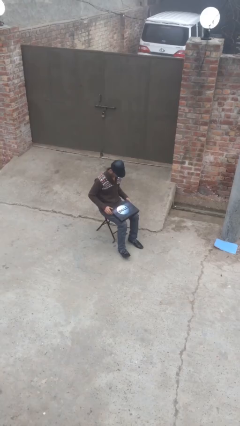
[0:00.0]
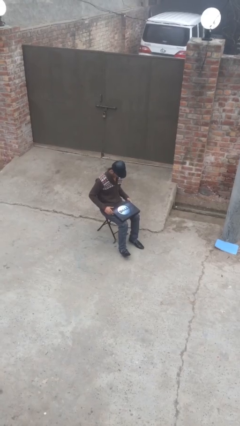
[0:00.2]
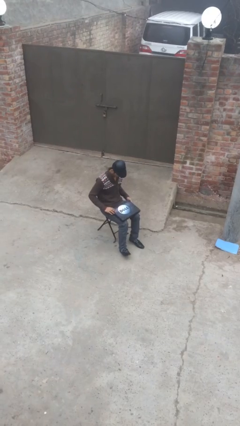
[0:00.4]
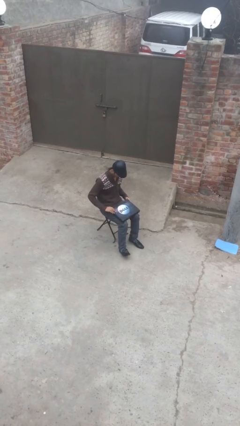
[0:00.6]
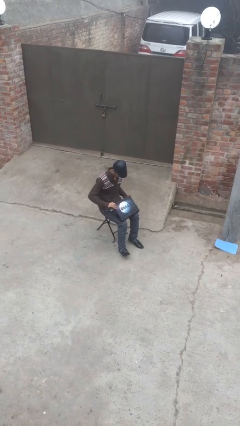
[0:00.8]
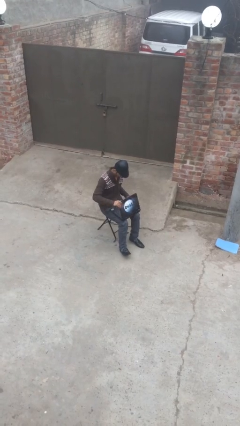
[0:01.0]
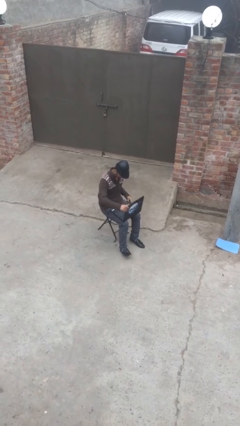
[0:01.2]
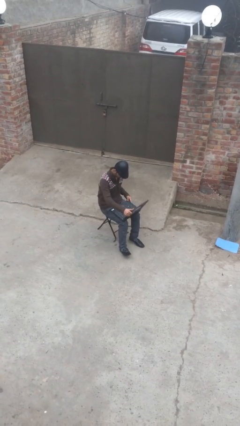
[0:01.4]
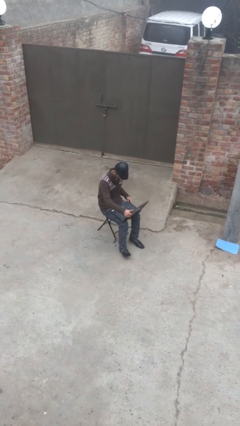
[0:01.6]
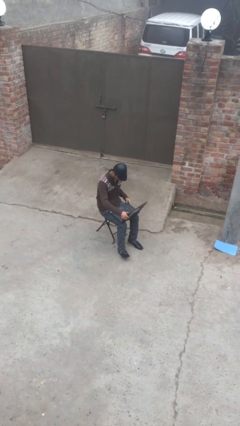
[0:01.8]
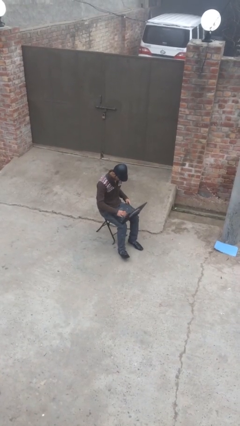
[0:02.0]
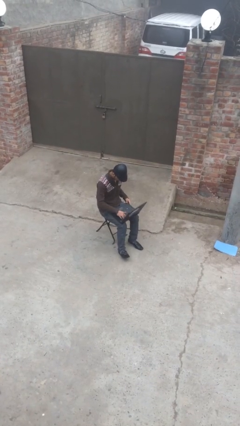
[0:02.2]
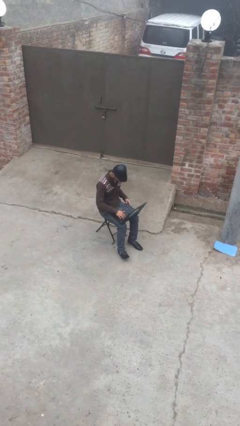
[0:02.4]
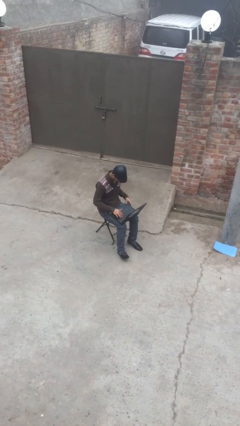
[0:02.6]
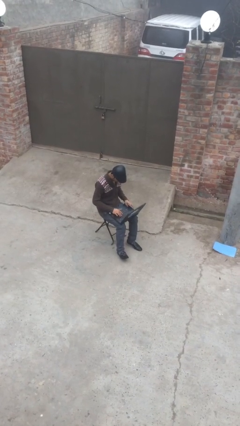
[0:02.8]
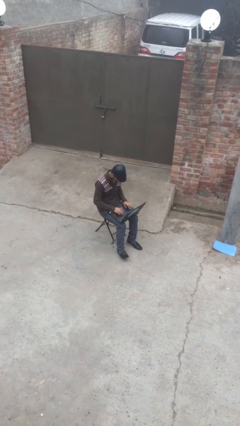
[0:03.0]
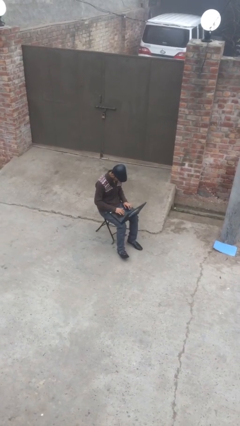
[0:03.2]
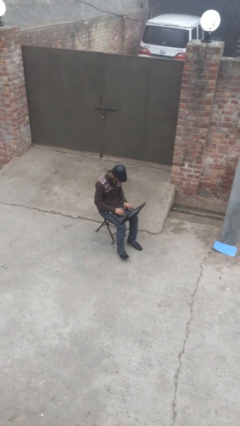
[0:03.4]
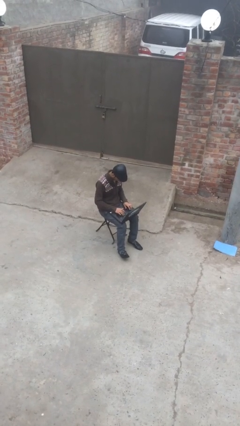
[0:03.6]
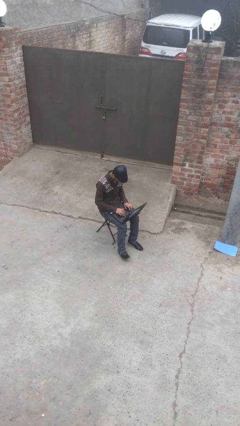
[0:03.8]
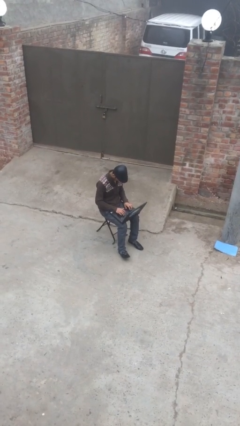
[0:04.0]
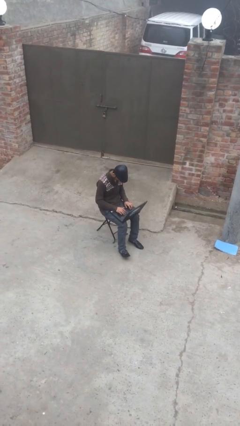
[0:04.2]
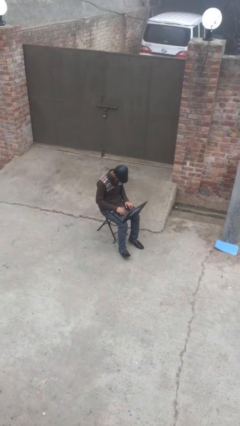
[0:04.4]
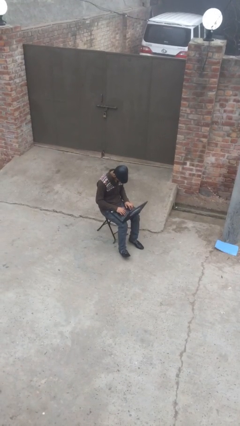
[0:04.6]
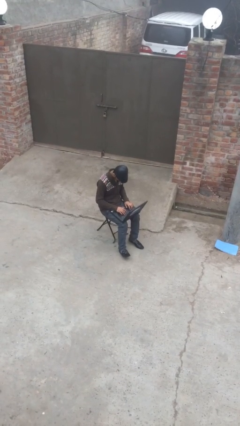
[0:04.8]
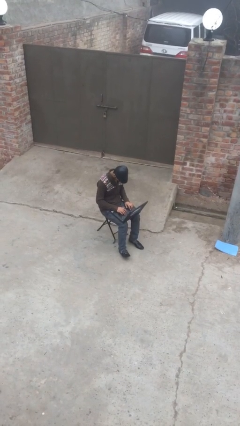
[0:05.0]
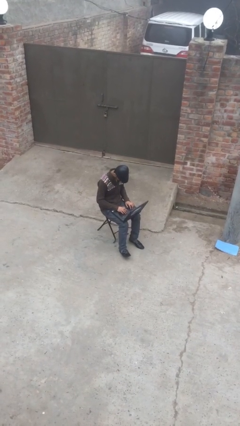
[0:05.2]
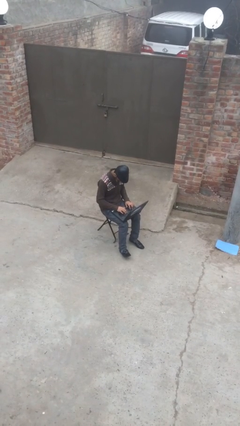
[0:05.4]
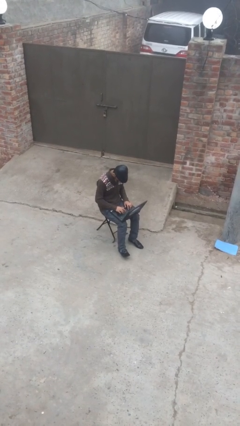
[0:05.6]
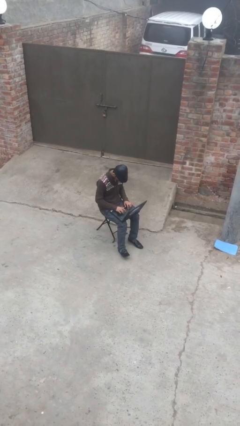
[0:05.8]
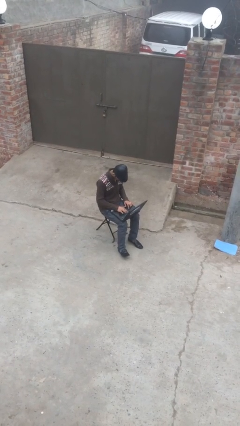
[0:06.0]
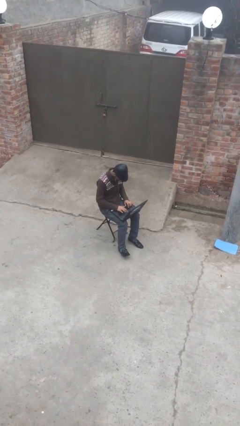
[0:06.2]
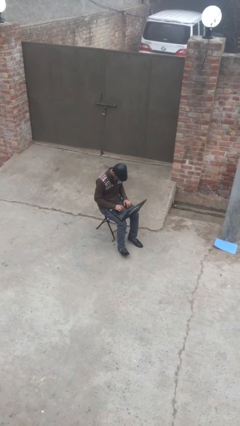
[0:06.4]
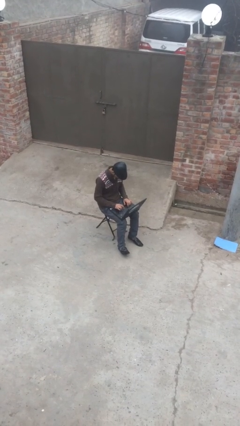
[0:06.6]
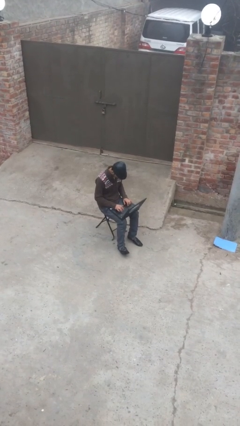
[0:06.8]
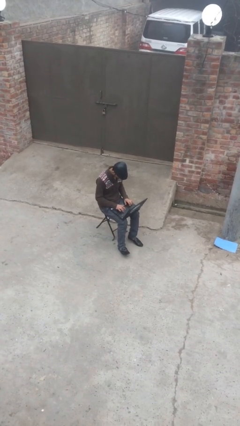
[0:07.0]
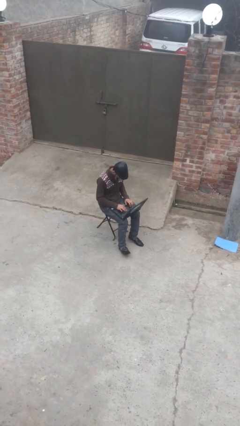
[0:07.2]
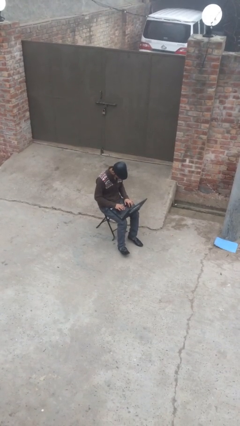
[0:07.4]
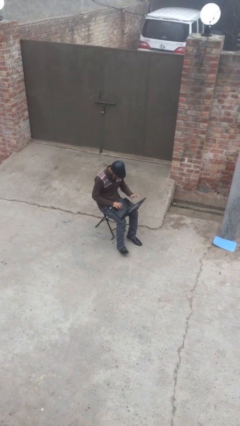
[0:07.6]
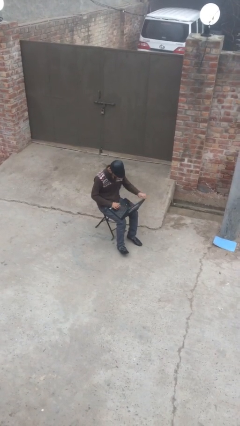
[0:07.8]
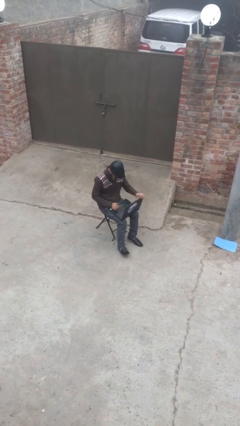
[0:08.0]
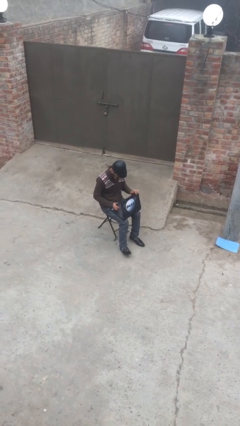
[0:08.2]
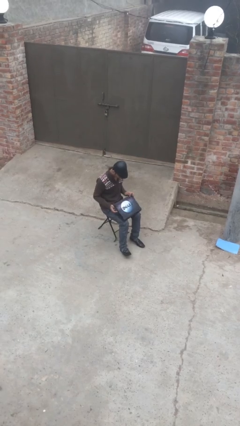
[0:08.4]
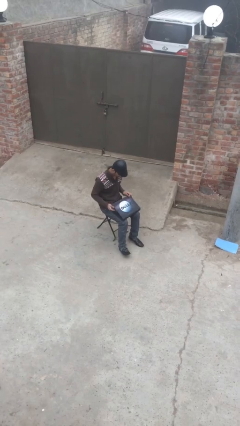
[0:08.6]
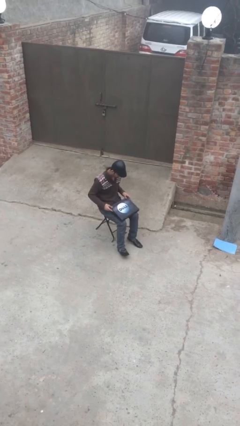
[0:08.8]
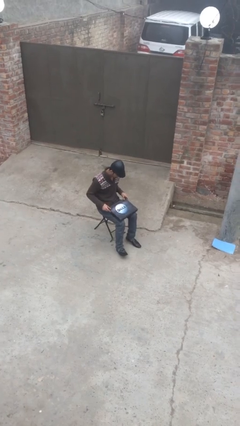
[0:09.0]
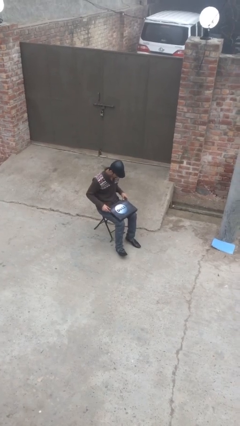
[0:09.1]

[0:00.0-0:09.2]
person interacts with laptop

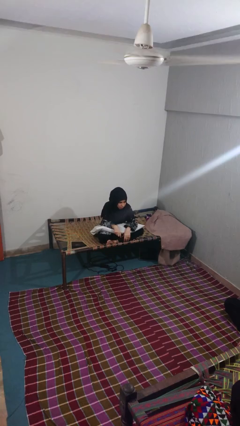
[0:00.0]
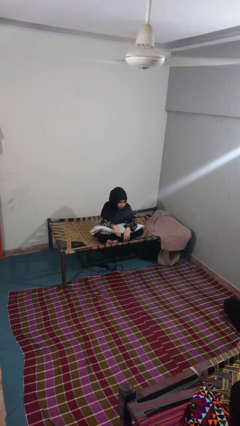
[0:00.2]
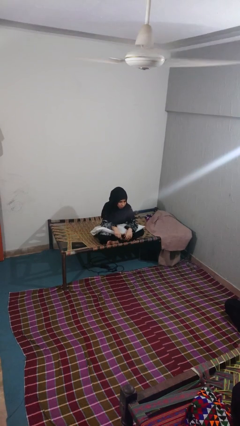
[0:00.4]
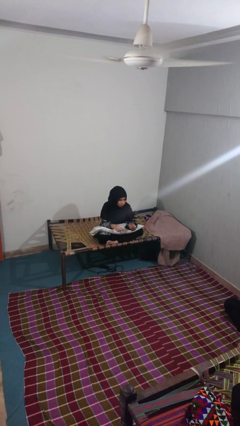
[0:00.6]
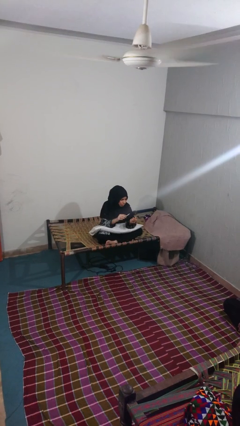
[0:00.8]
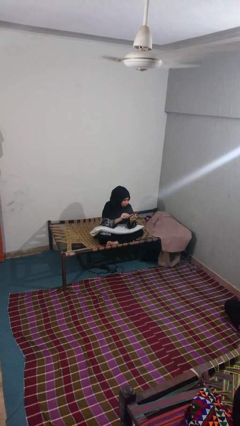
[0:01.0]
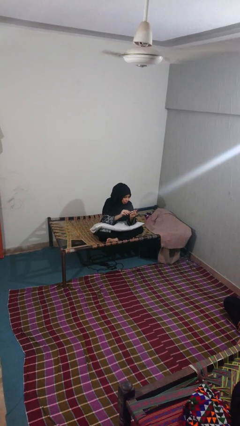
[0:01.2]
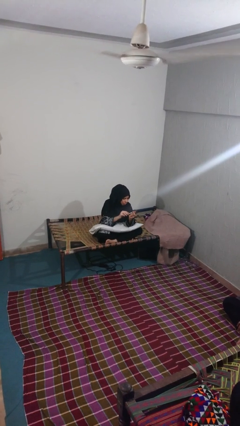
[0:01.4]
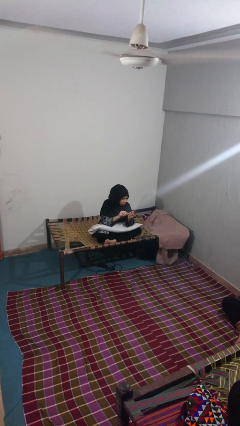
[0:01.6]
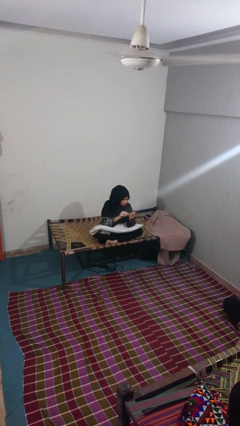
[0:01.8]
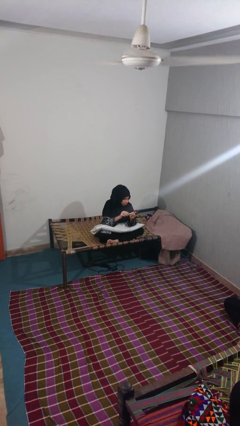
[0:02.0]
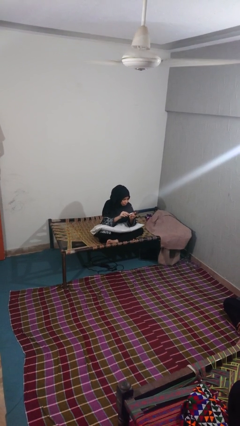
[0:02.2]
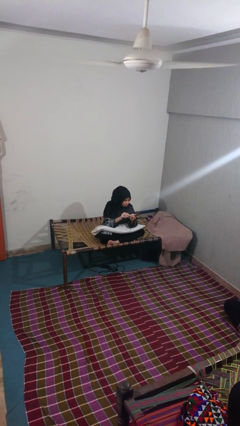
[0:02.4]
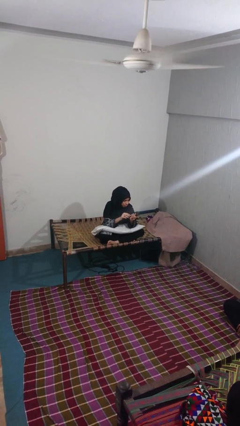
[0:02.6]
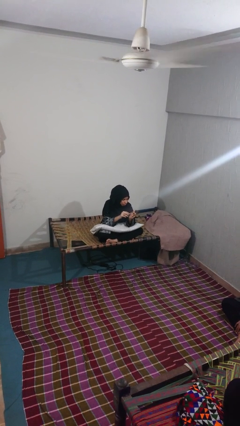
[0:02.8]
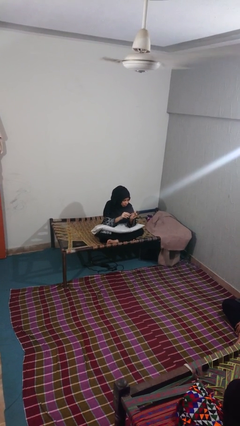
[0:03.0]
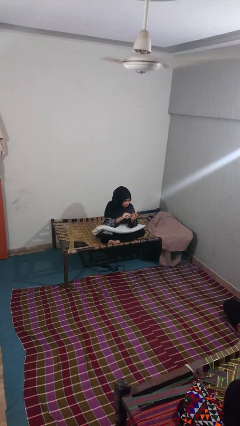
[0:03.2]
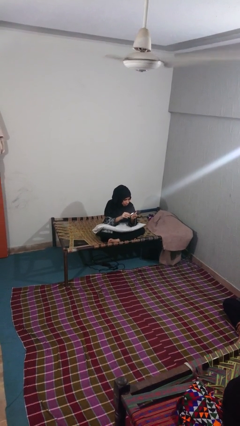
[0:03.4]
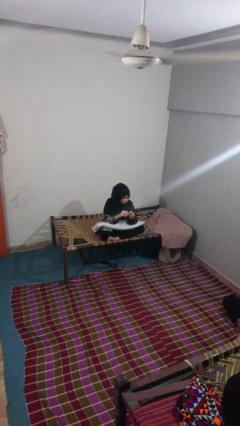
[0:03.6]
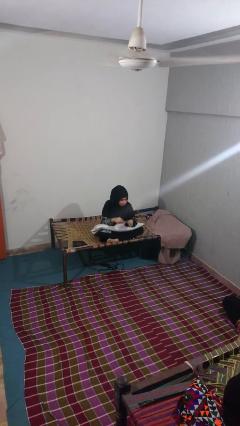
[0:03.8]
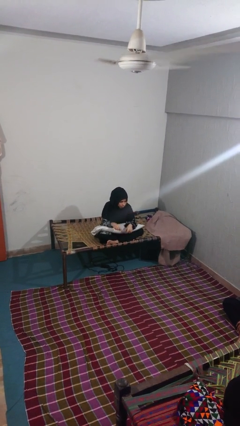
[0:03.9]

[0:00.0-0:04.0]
person files fingernails

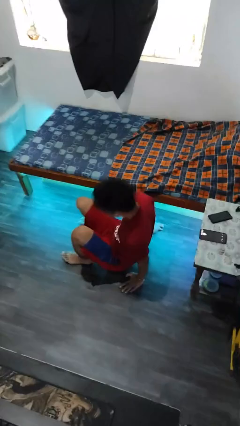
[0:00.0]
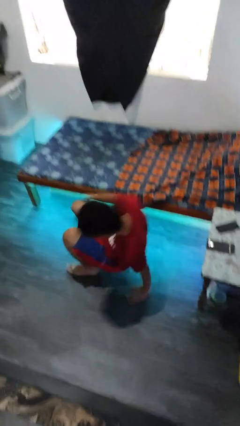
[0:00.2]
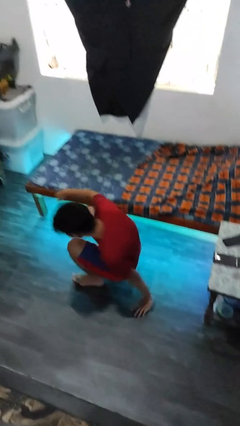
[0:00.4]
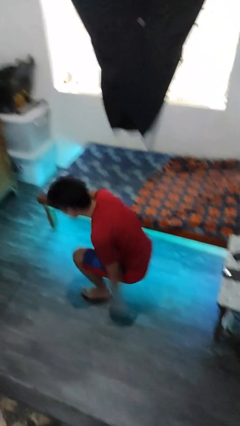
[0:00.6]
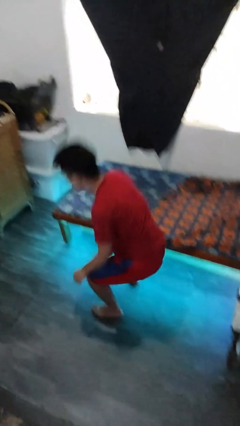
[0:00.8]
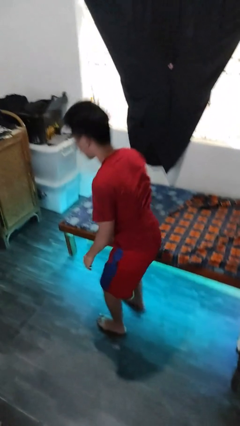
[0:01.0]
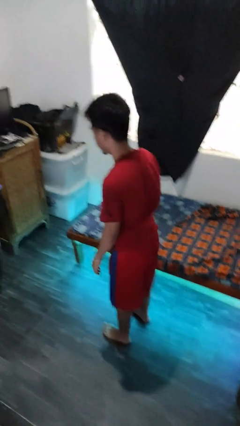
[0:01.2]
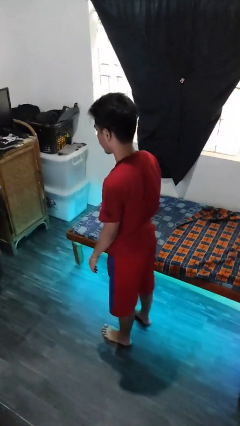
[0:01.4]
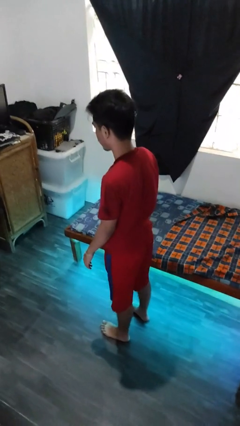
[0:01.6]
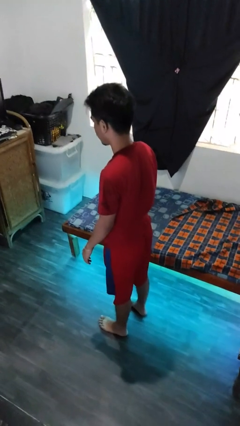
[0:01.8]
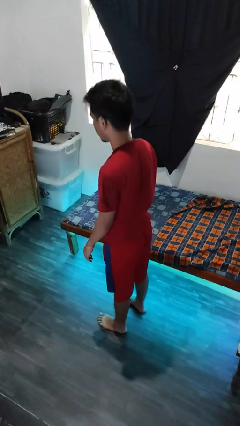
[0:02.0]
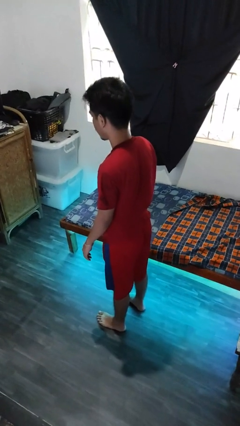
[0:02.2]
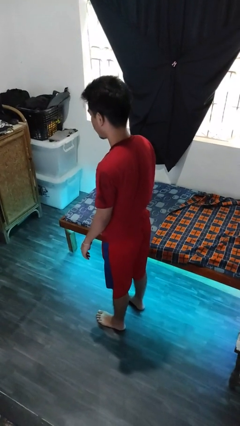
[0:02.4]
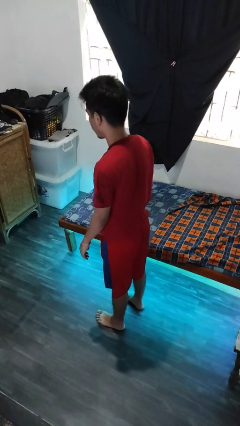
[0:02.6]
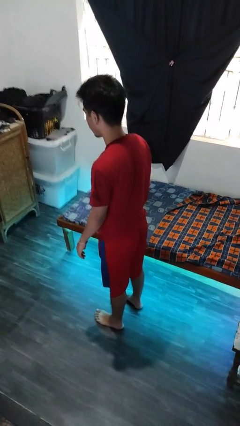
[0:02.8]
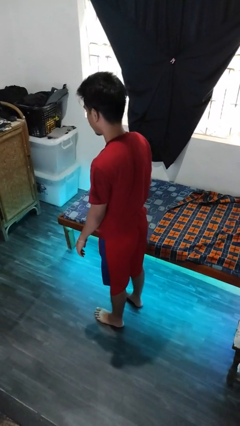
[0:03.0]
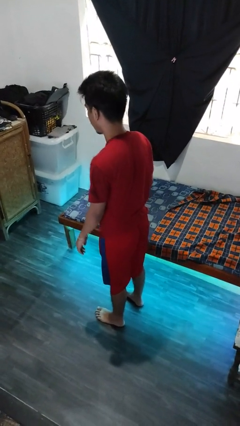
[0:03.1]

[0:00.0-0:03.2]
person stands up from floor

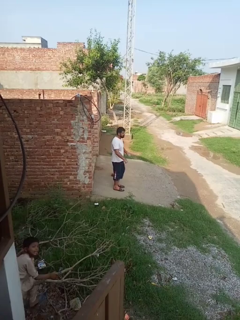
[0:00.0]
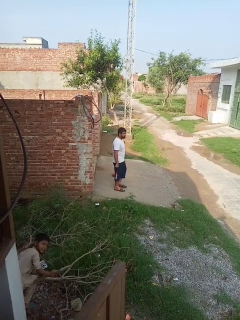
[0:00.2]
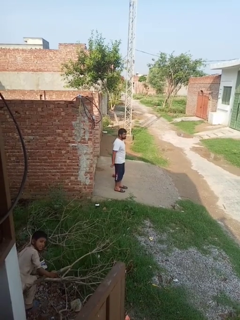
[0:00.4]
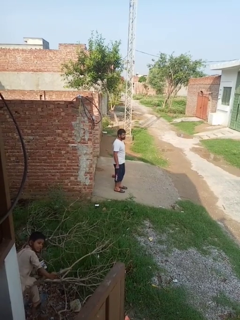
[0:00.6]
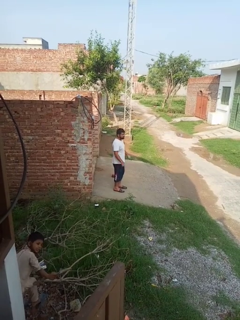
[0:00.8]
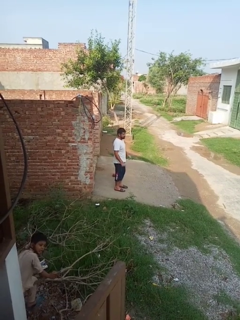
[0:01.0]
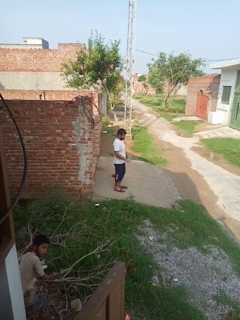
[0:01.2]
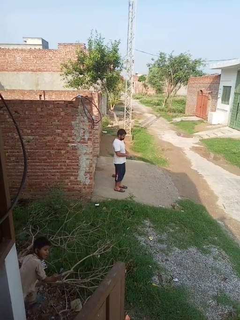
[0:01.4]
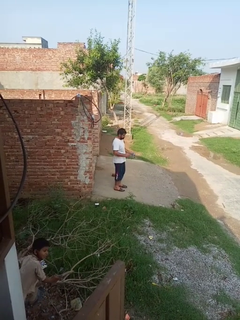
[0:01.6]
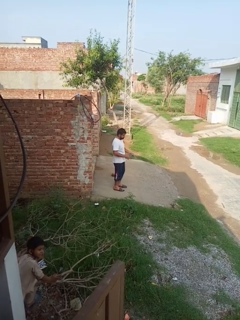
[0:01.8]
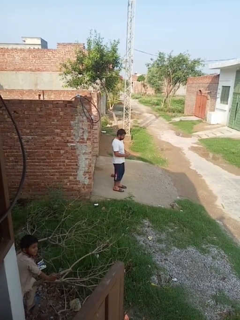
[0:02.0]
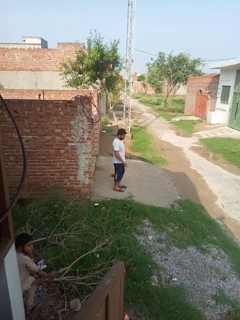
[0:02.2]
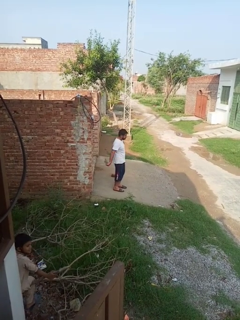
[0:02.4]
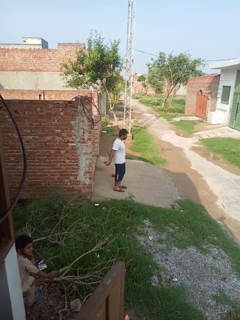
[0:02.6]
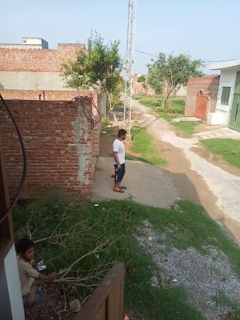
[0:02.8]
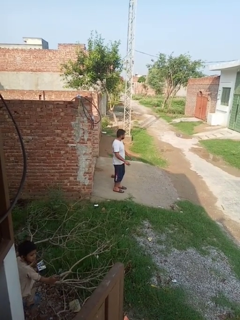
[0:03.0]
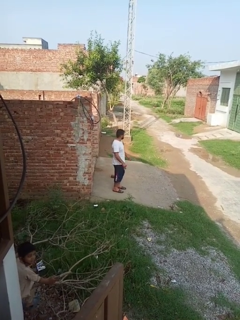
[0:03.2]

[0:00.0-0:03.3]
person takes off gloves
